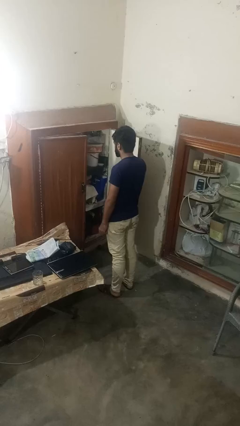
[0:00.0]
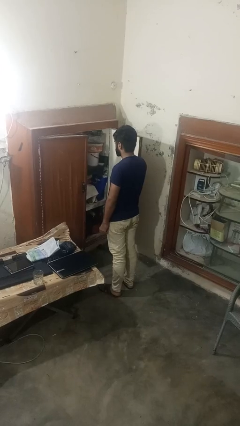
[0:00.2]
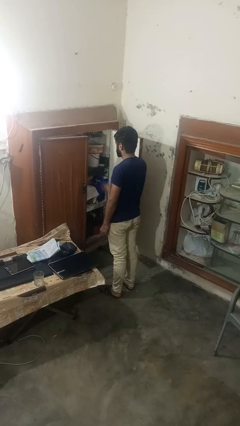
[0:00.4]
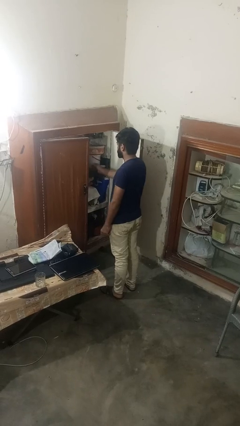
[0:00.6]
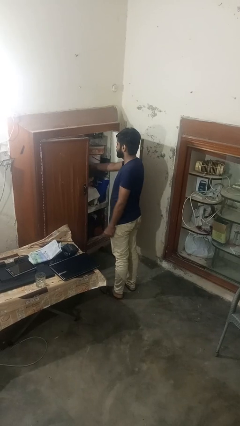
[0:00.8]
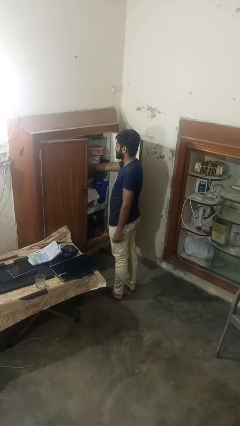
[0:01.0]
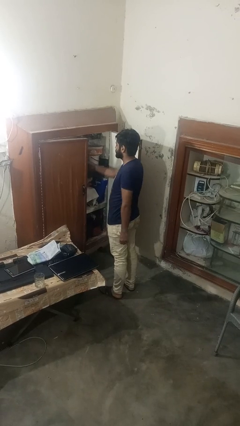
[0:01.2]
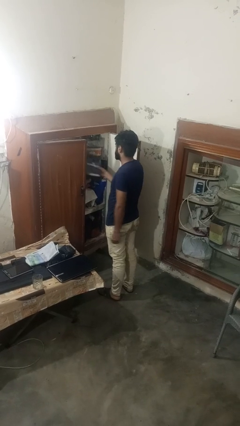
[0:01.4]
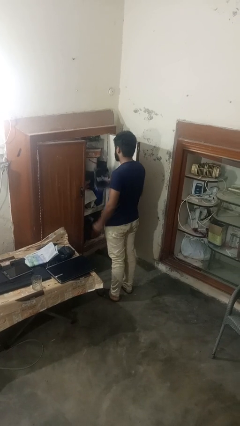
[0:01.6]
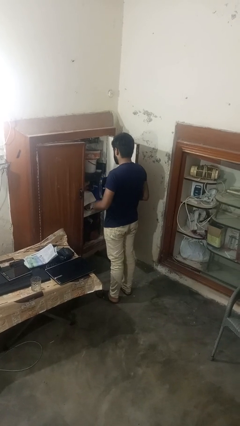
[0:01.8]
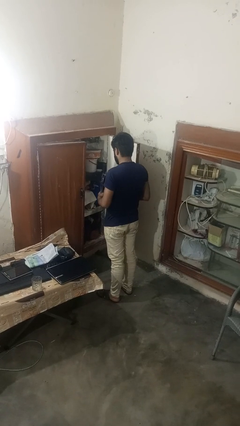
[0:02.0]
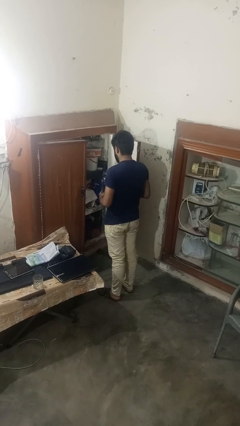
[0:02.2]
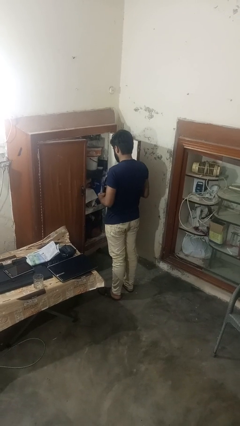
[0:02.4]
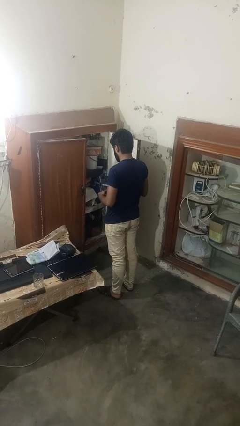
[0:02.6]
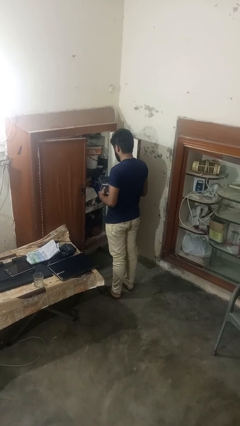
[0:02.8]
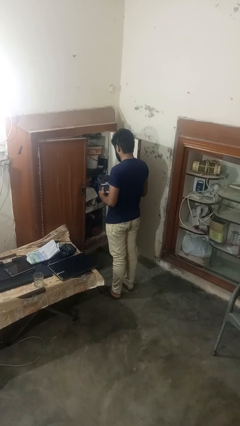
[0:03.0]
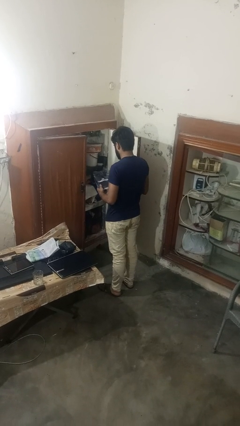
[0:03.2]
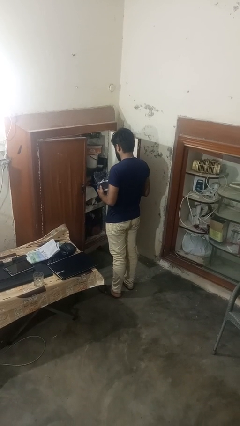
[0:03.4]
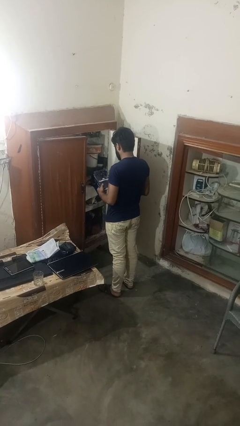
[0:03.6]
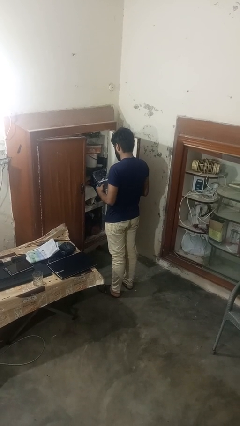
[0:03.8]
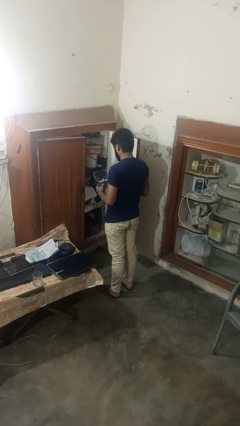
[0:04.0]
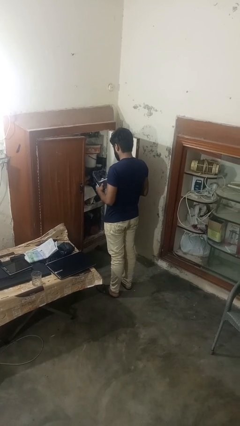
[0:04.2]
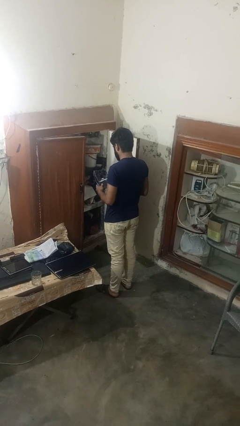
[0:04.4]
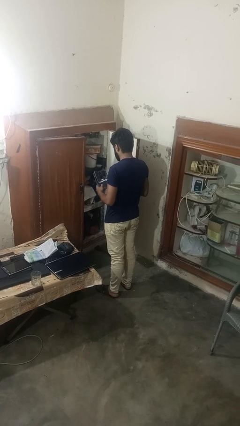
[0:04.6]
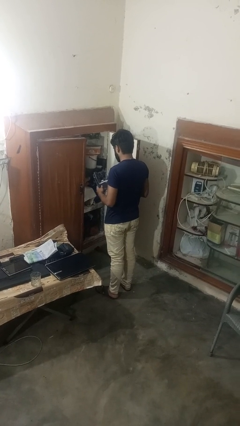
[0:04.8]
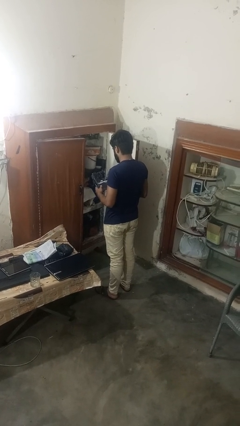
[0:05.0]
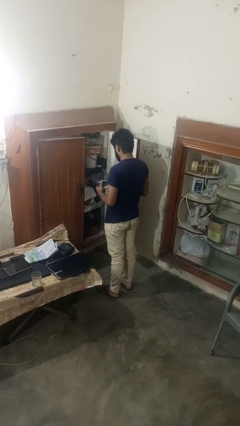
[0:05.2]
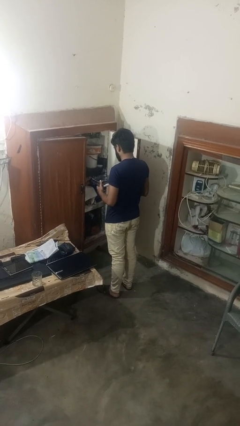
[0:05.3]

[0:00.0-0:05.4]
person picks up object from cabinet

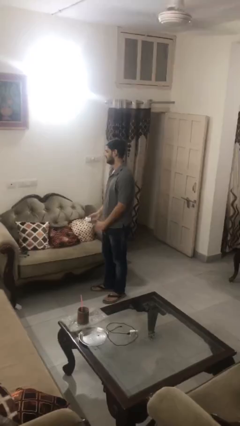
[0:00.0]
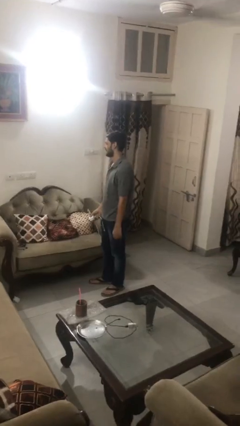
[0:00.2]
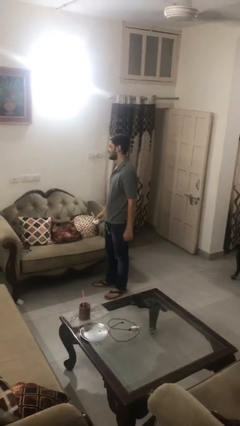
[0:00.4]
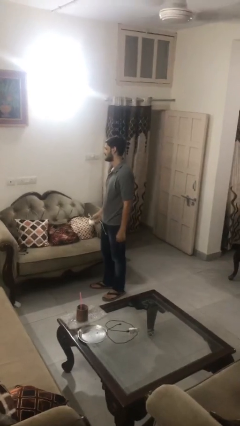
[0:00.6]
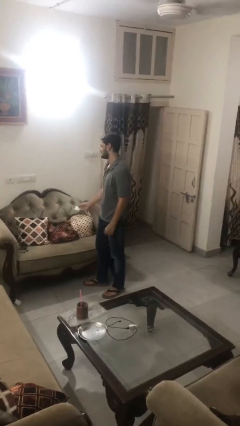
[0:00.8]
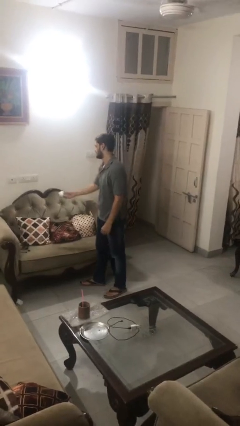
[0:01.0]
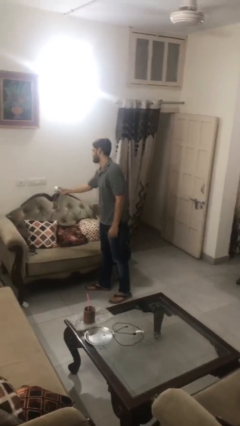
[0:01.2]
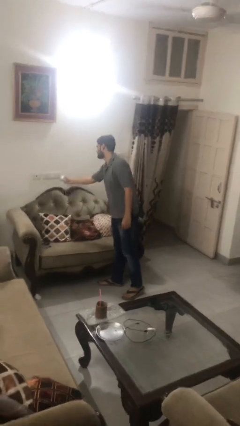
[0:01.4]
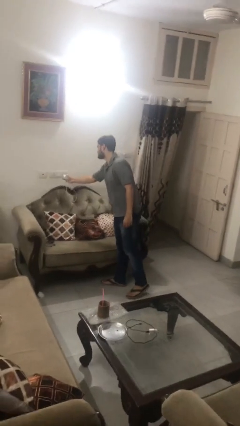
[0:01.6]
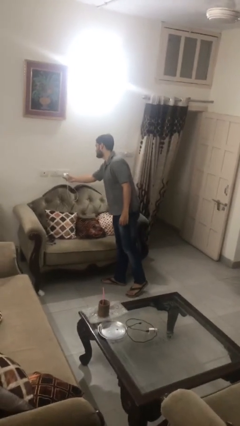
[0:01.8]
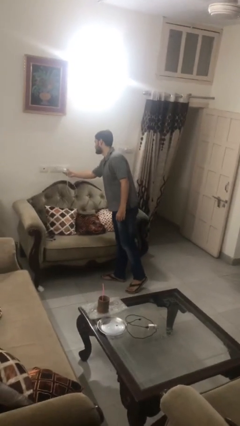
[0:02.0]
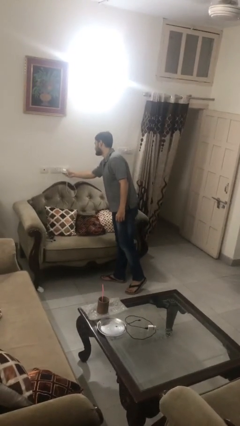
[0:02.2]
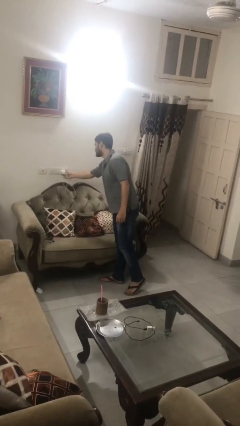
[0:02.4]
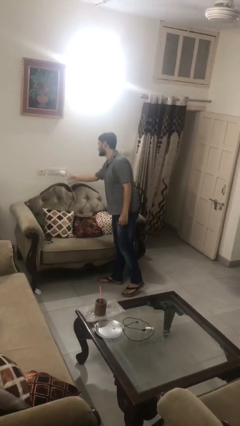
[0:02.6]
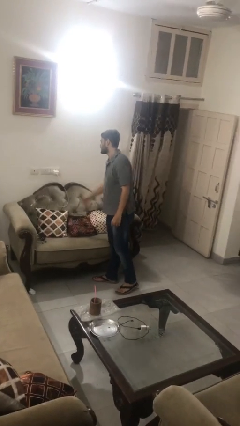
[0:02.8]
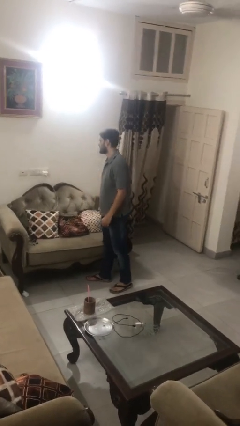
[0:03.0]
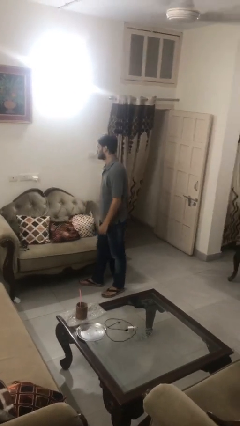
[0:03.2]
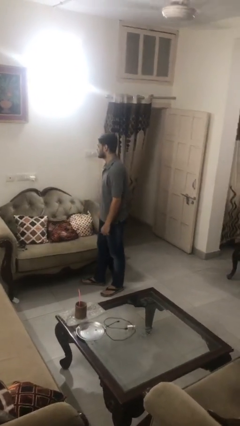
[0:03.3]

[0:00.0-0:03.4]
person plugs into electrical socket

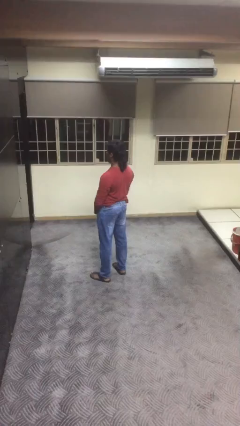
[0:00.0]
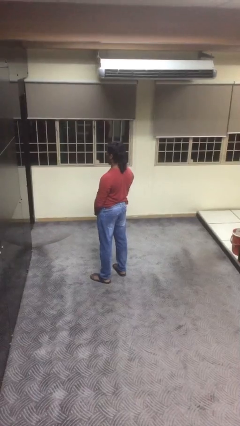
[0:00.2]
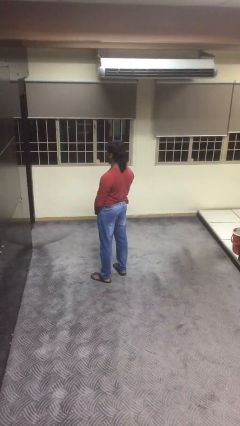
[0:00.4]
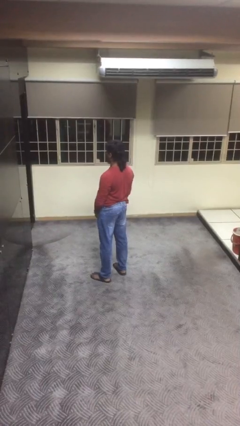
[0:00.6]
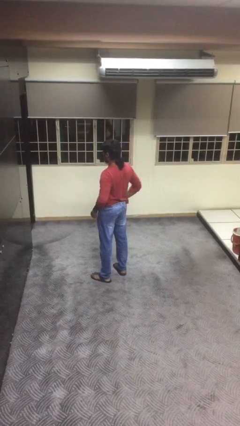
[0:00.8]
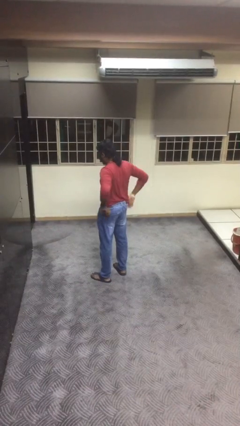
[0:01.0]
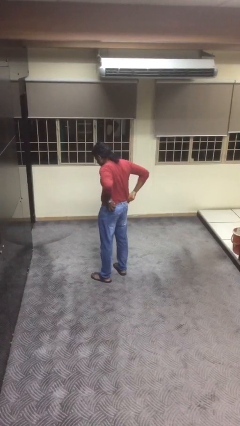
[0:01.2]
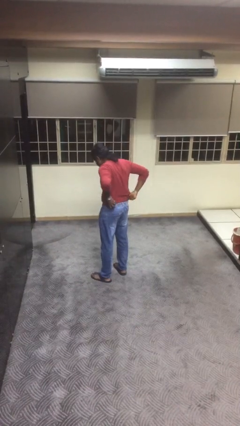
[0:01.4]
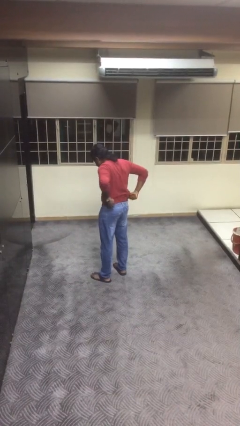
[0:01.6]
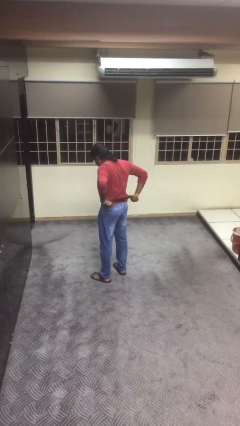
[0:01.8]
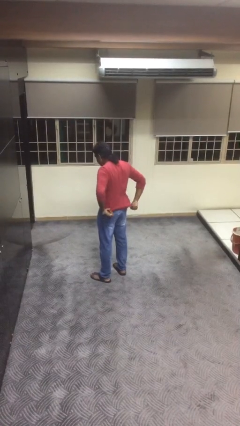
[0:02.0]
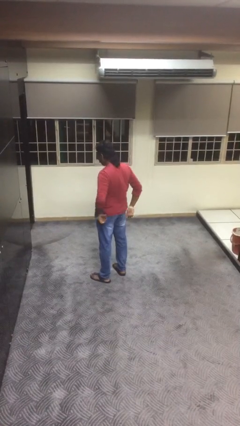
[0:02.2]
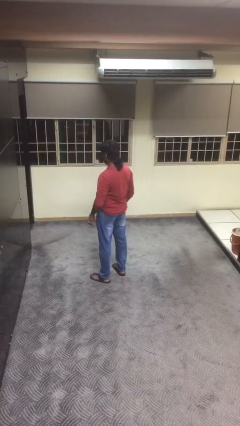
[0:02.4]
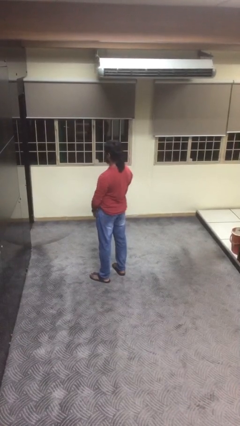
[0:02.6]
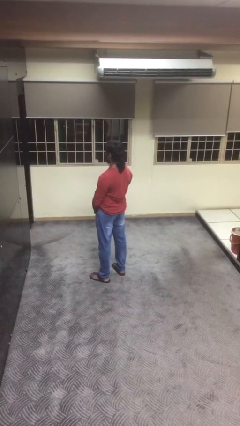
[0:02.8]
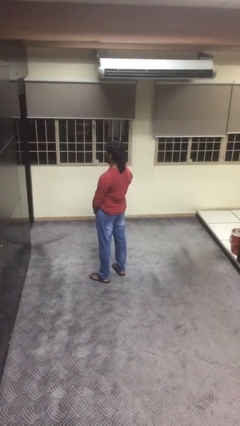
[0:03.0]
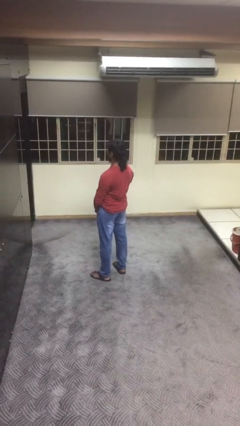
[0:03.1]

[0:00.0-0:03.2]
person untucks shirt

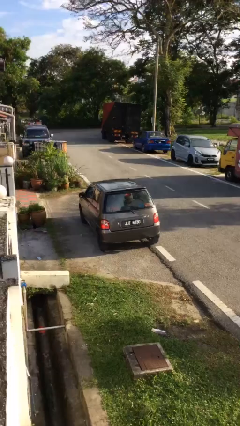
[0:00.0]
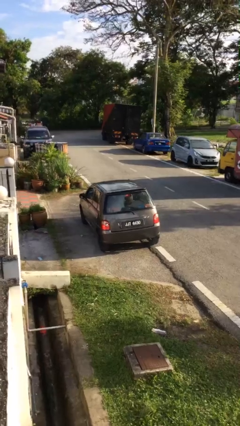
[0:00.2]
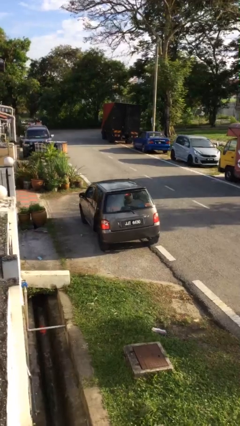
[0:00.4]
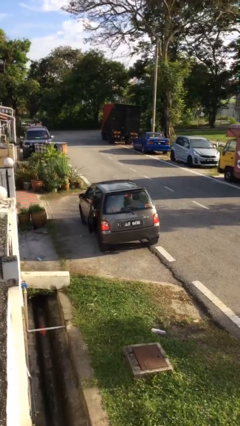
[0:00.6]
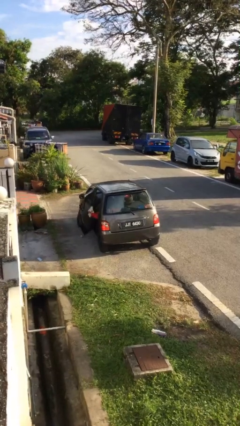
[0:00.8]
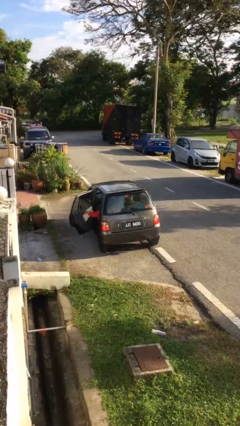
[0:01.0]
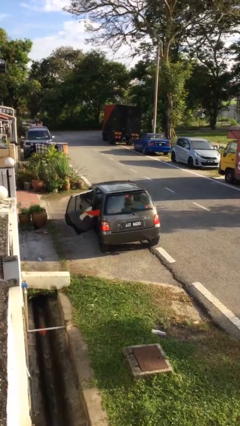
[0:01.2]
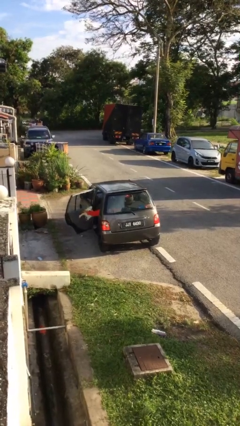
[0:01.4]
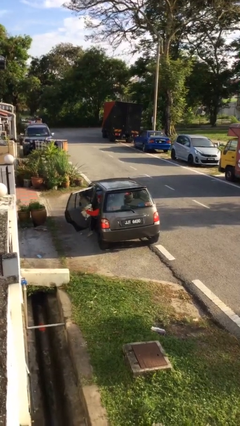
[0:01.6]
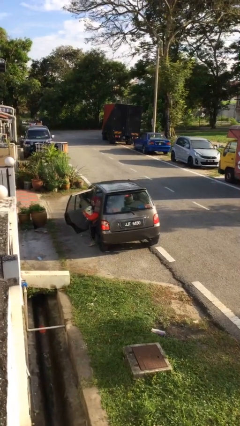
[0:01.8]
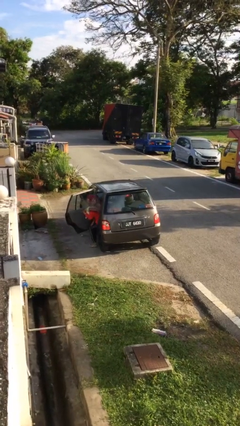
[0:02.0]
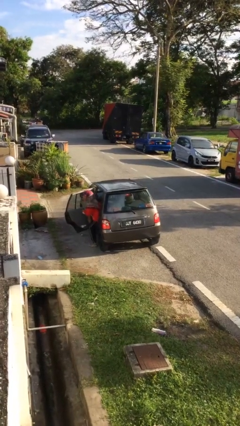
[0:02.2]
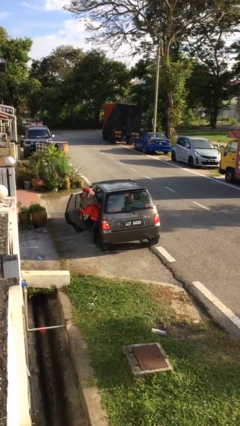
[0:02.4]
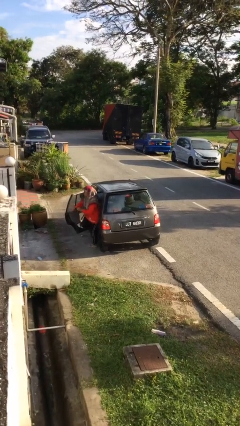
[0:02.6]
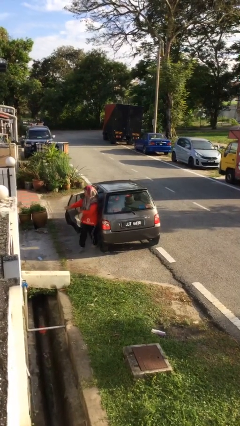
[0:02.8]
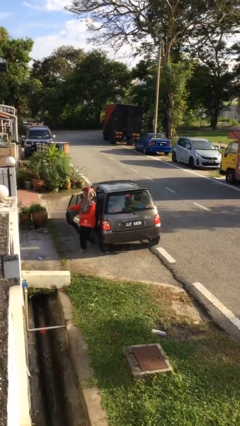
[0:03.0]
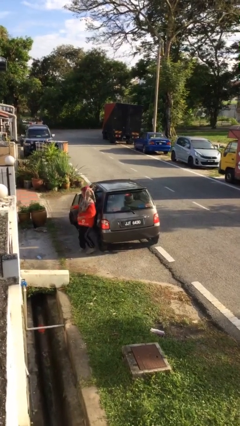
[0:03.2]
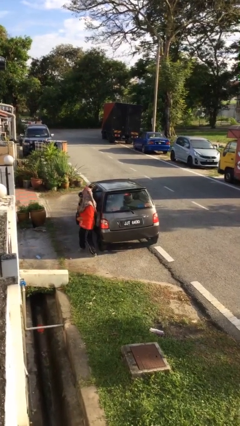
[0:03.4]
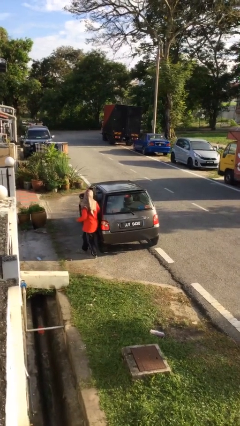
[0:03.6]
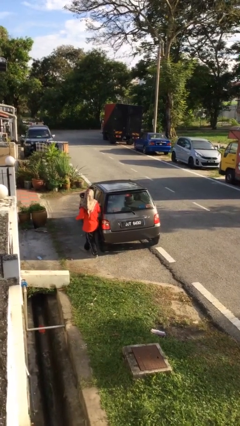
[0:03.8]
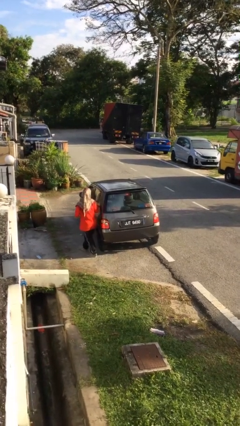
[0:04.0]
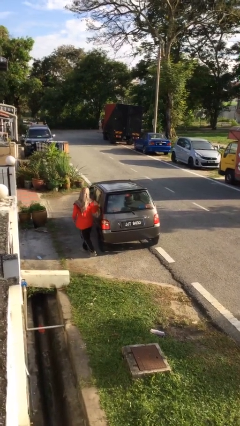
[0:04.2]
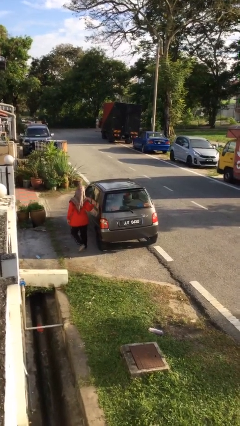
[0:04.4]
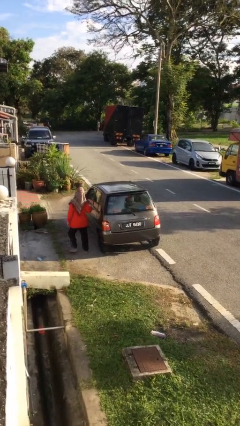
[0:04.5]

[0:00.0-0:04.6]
car drops off person

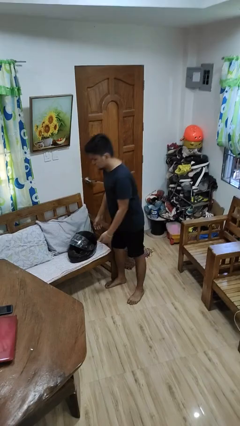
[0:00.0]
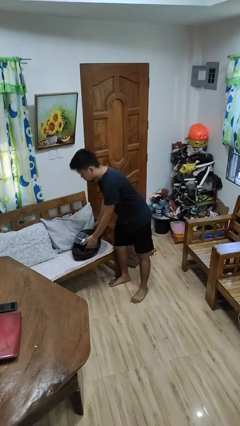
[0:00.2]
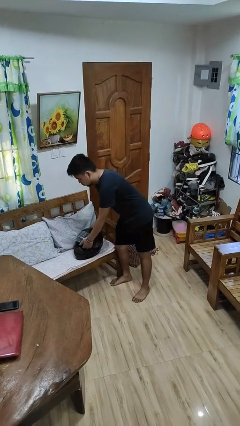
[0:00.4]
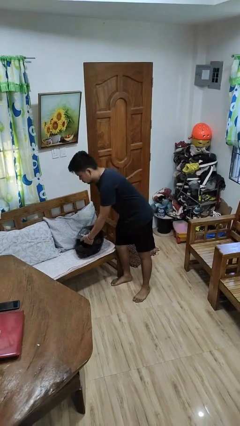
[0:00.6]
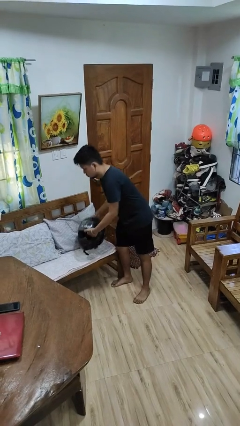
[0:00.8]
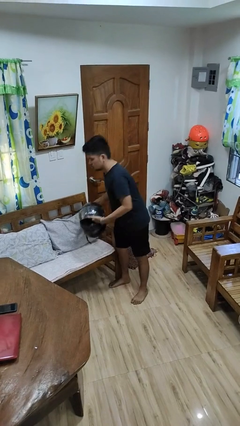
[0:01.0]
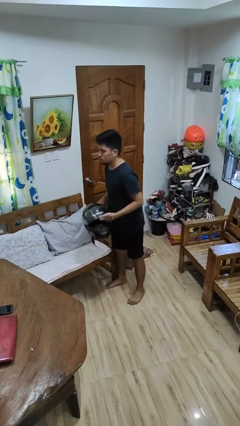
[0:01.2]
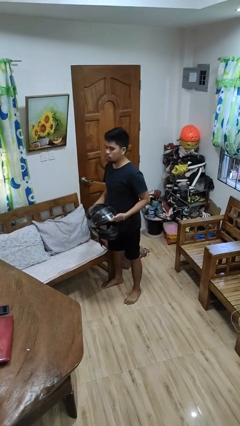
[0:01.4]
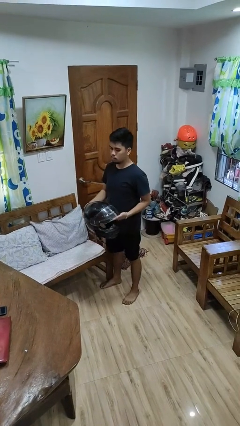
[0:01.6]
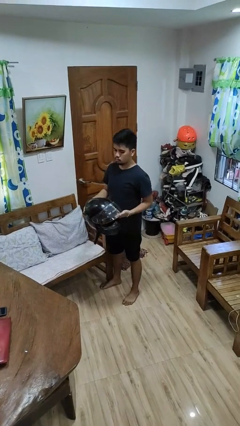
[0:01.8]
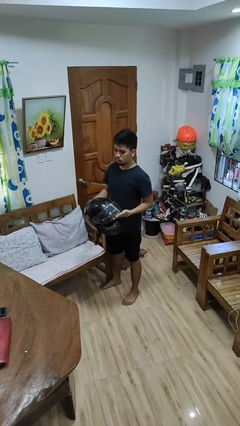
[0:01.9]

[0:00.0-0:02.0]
person picks up object from couch
